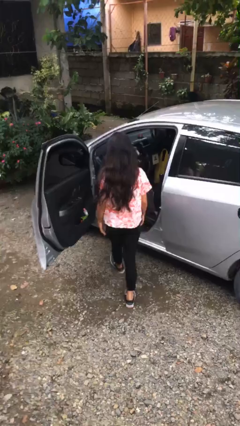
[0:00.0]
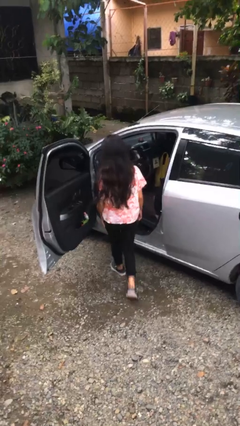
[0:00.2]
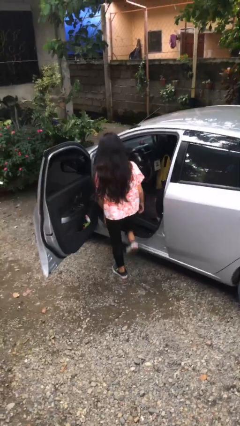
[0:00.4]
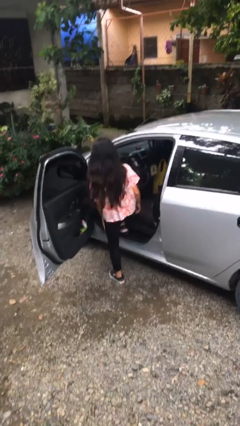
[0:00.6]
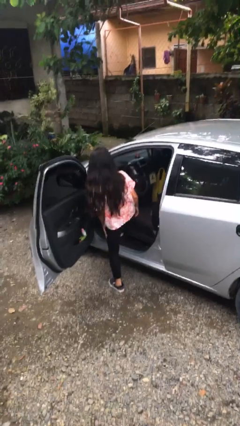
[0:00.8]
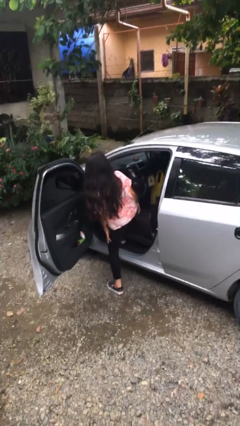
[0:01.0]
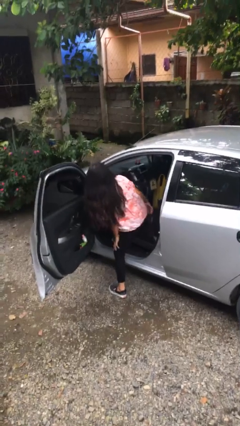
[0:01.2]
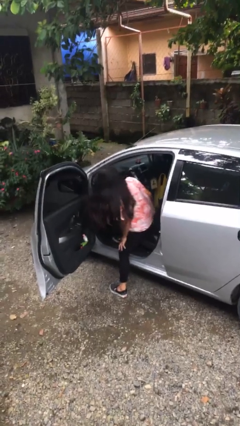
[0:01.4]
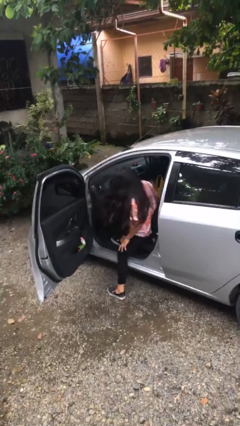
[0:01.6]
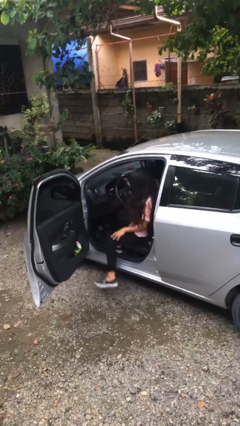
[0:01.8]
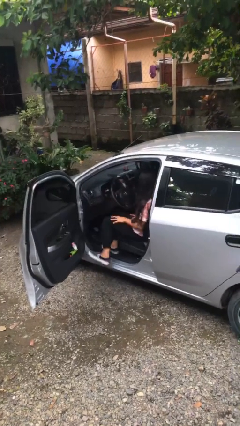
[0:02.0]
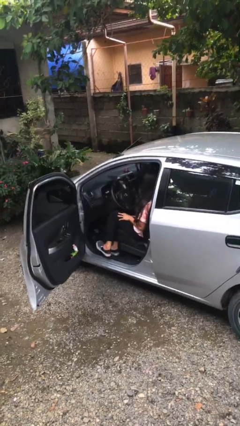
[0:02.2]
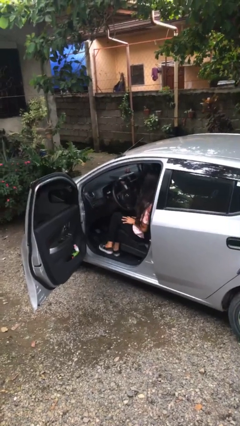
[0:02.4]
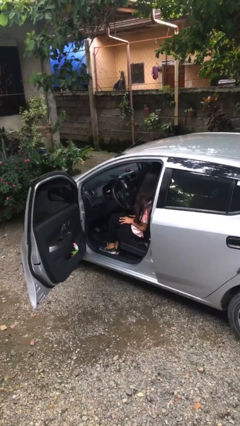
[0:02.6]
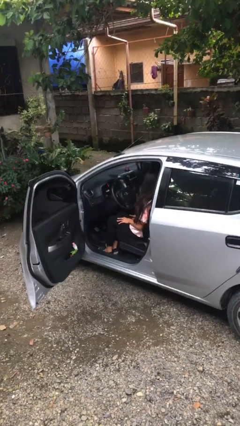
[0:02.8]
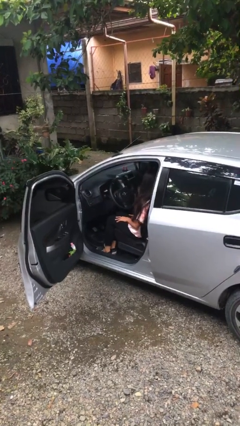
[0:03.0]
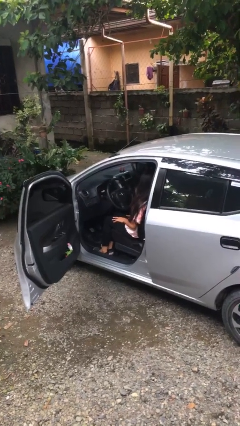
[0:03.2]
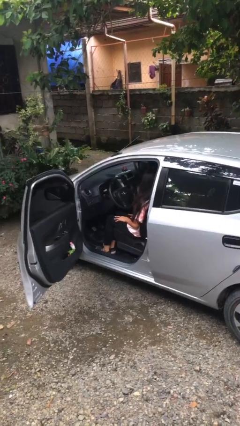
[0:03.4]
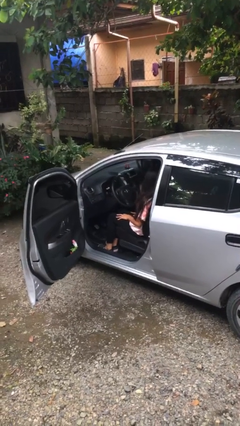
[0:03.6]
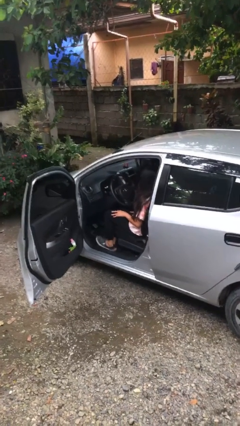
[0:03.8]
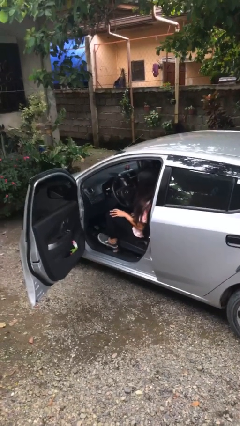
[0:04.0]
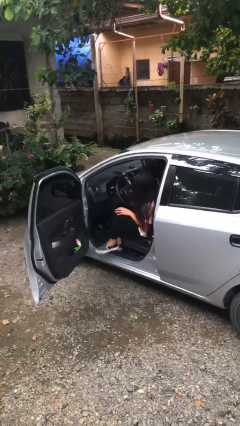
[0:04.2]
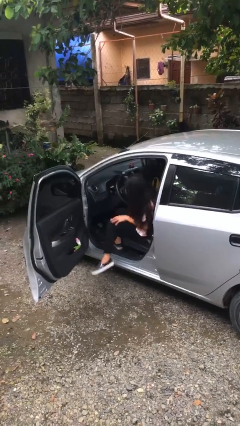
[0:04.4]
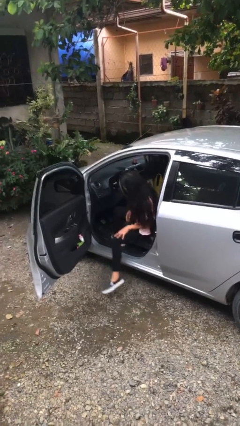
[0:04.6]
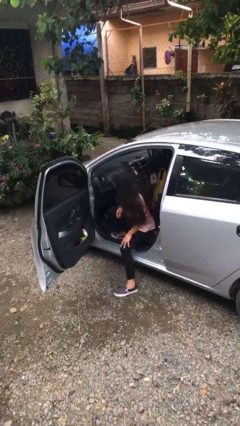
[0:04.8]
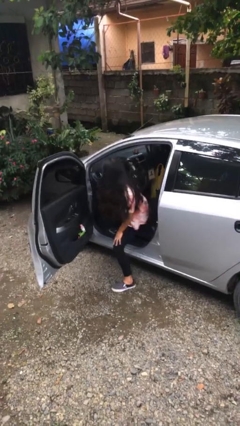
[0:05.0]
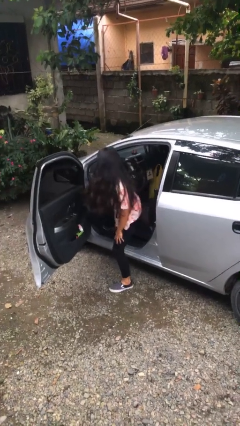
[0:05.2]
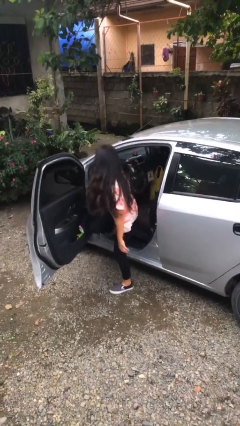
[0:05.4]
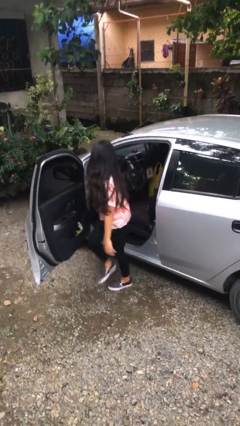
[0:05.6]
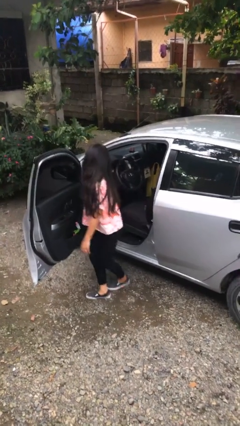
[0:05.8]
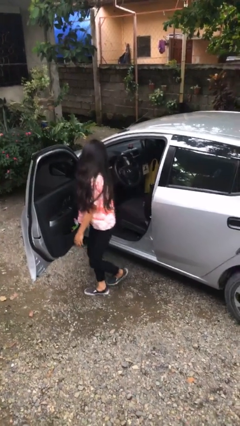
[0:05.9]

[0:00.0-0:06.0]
person enters car

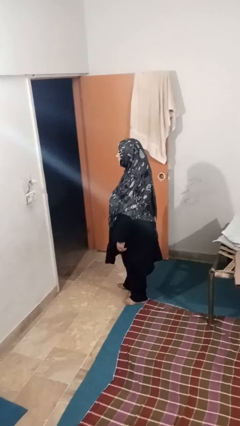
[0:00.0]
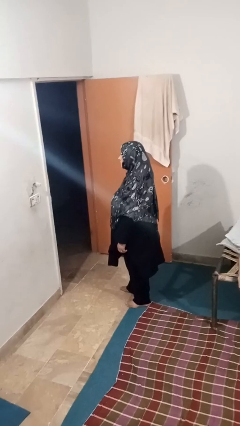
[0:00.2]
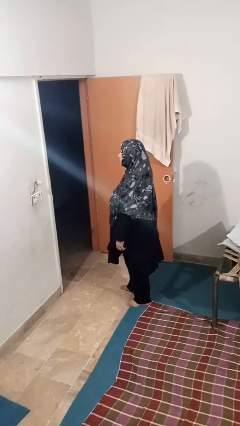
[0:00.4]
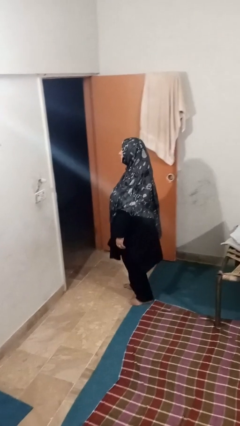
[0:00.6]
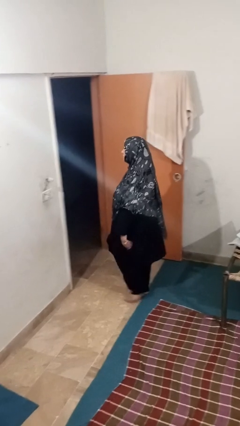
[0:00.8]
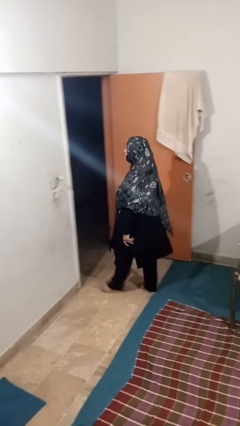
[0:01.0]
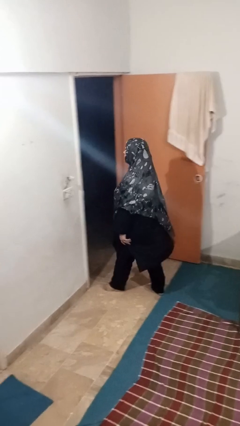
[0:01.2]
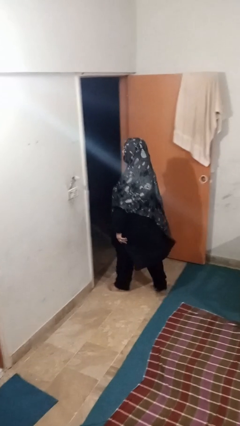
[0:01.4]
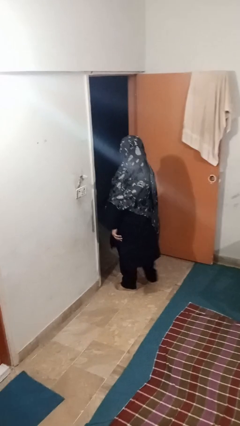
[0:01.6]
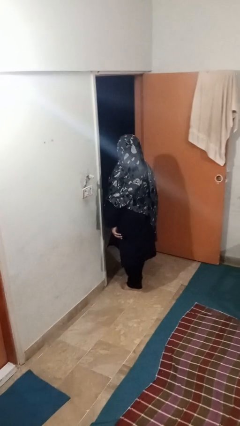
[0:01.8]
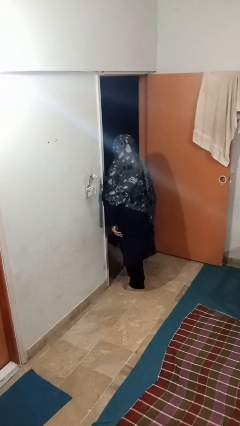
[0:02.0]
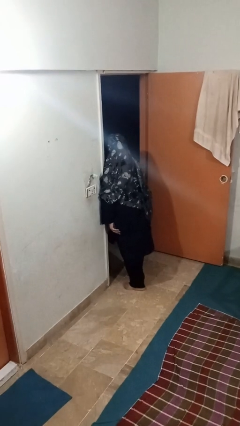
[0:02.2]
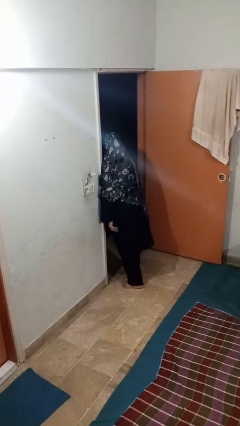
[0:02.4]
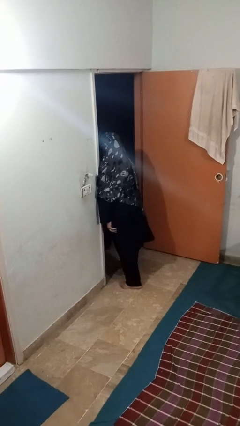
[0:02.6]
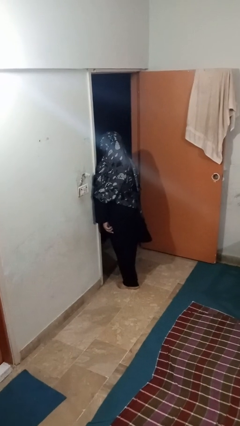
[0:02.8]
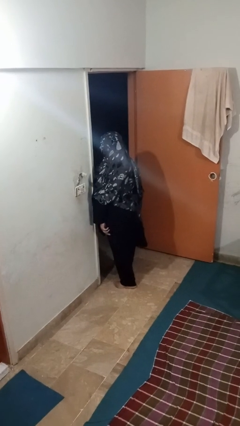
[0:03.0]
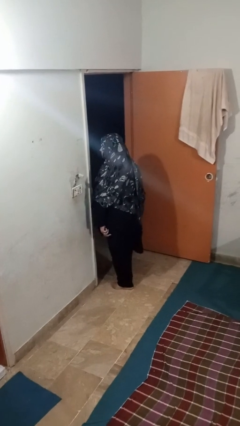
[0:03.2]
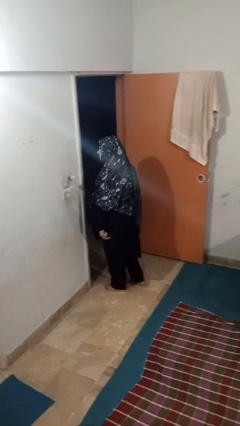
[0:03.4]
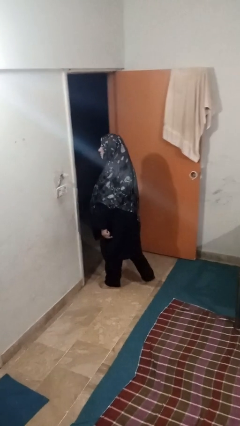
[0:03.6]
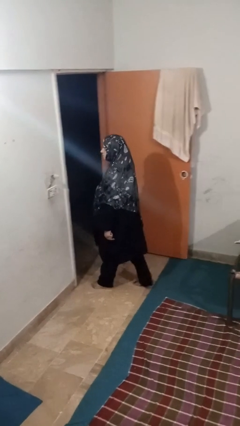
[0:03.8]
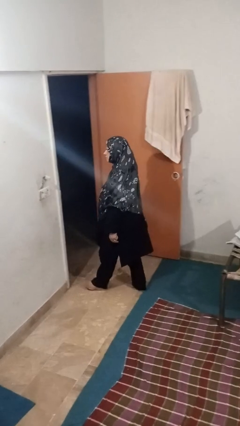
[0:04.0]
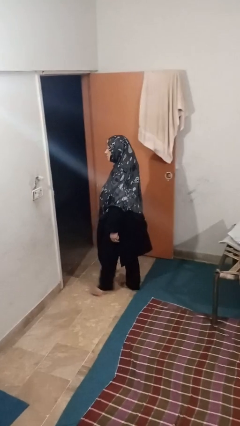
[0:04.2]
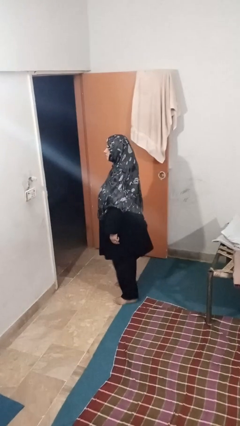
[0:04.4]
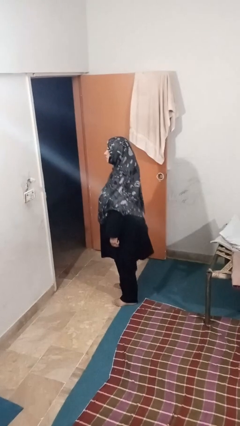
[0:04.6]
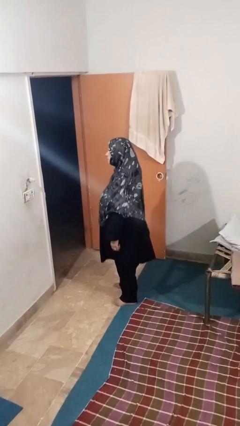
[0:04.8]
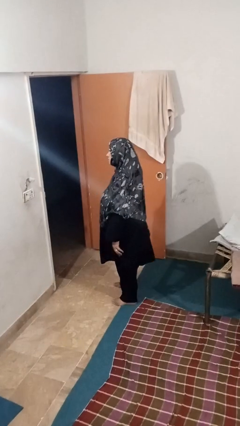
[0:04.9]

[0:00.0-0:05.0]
person bumps into wall

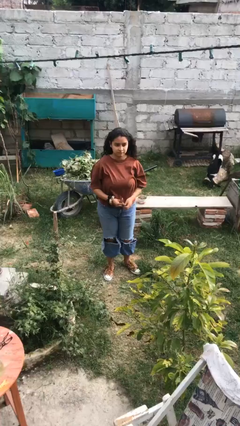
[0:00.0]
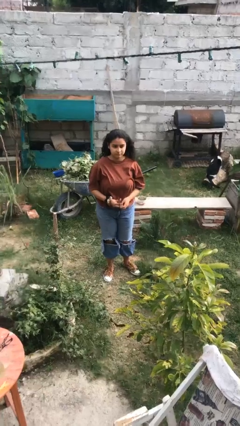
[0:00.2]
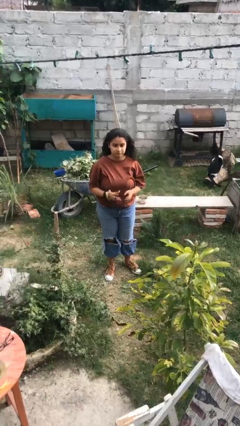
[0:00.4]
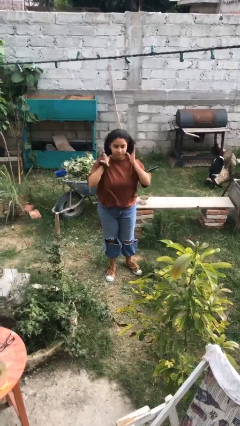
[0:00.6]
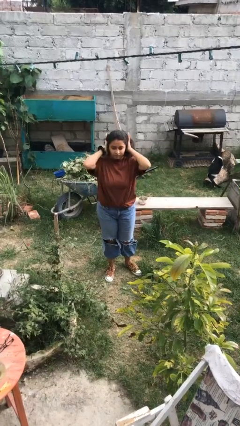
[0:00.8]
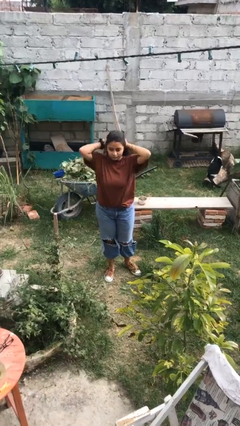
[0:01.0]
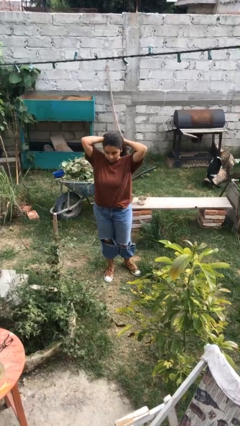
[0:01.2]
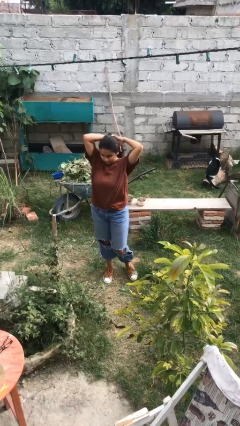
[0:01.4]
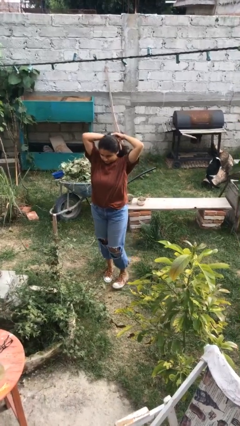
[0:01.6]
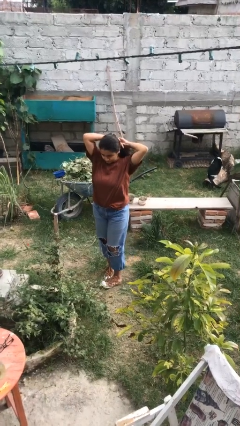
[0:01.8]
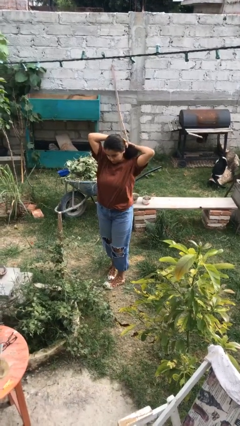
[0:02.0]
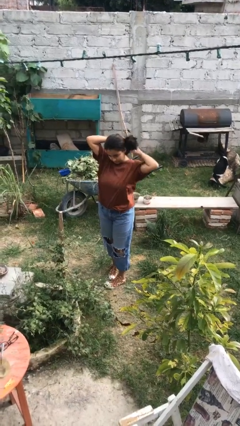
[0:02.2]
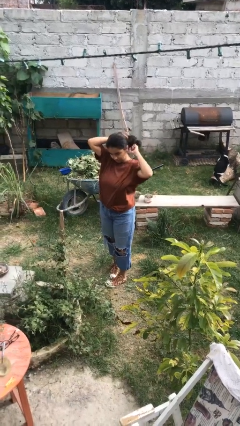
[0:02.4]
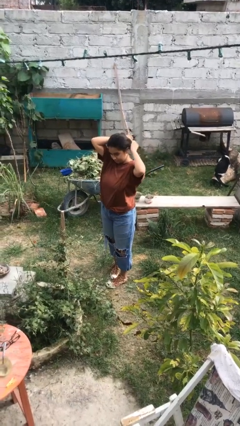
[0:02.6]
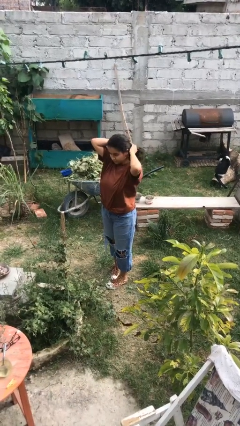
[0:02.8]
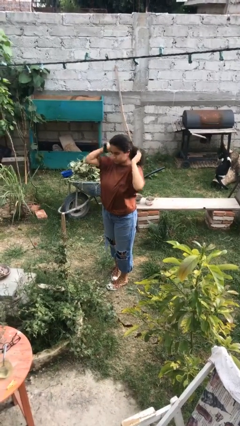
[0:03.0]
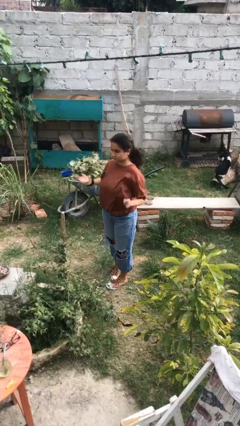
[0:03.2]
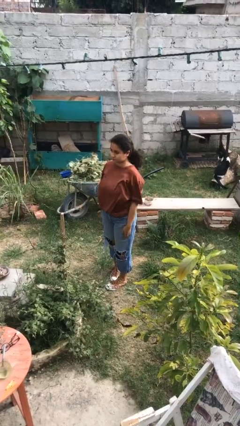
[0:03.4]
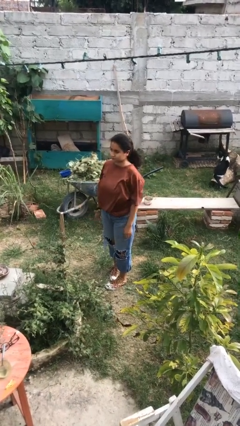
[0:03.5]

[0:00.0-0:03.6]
person puts hair in ponytail

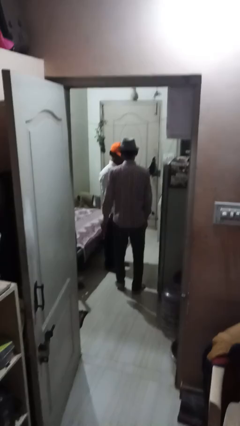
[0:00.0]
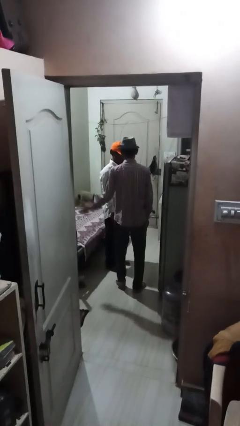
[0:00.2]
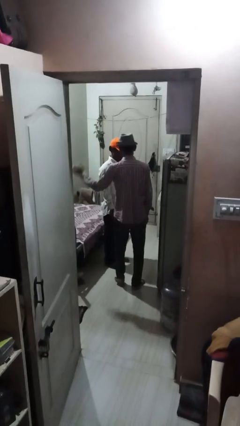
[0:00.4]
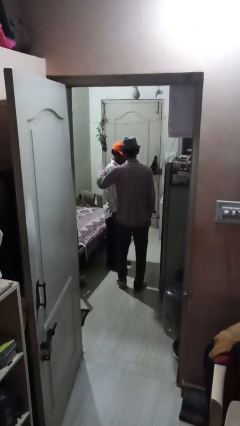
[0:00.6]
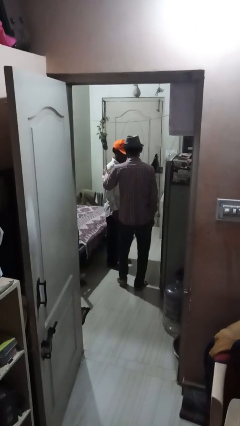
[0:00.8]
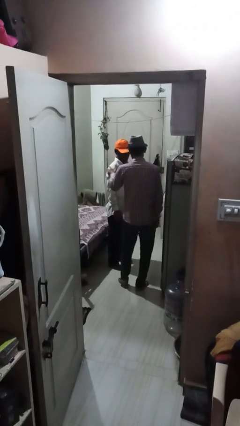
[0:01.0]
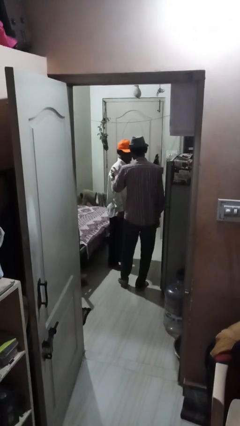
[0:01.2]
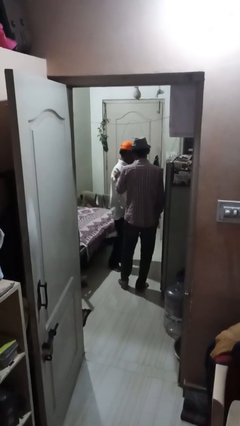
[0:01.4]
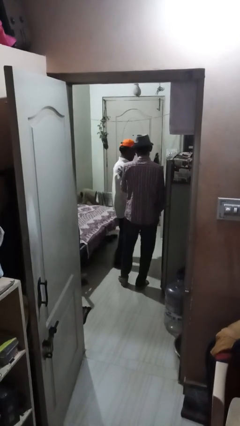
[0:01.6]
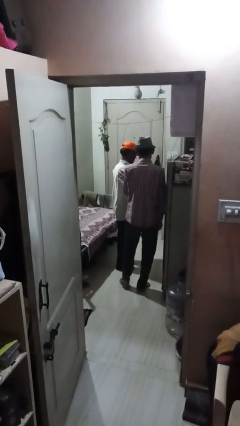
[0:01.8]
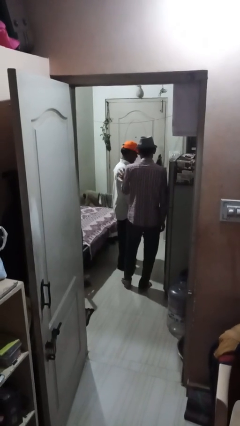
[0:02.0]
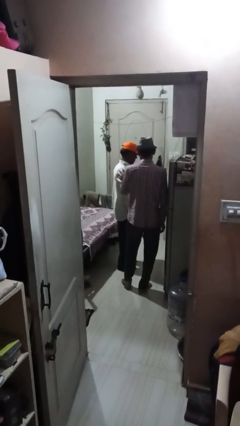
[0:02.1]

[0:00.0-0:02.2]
person pounds shoulders of person

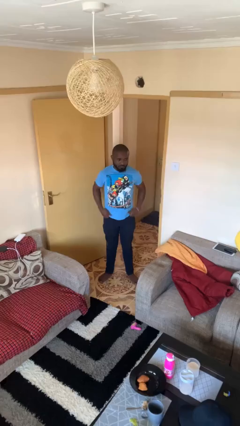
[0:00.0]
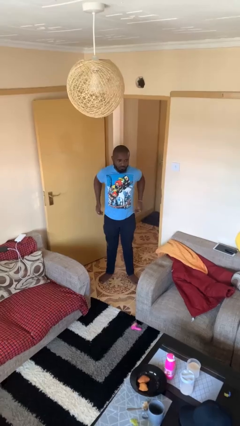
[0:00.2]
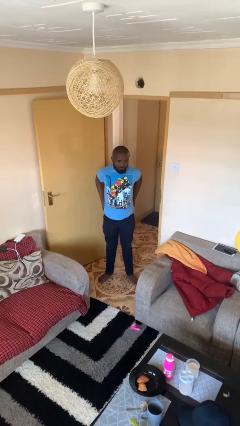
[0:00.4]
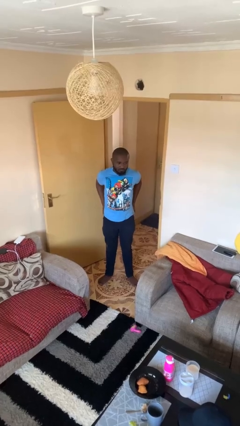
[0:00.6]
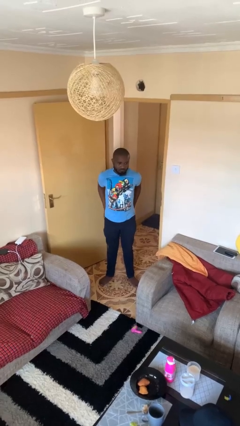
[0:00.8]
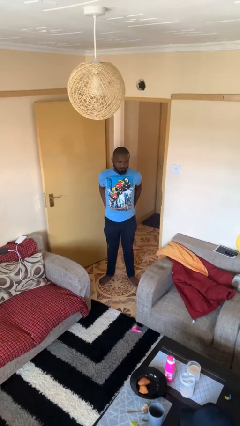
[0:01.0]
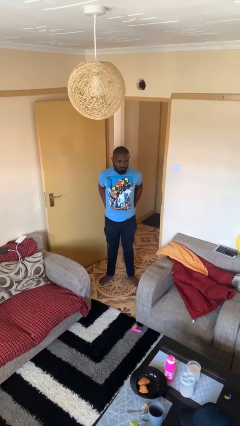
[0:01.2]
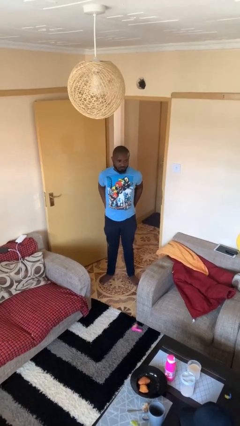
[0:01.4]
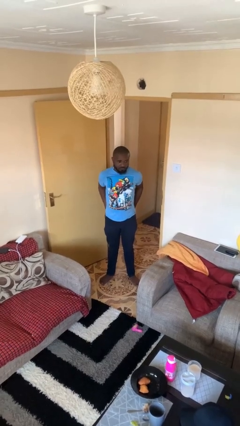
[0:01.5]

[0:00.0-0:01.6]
person puts hands in back pockets
